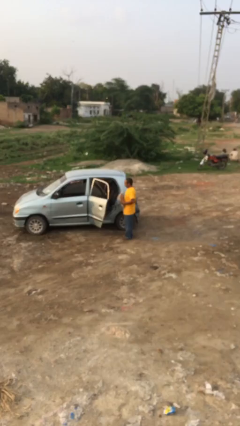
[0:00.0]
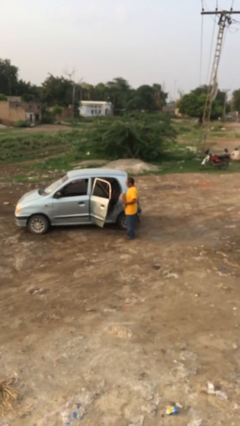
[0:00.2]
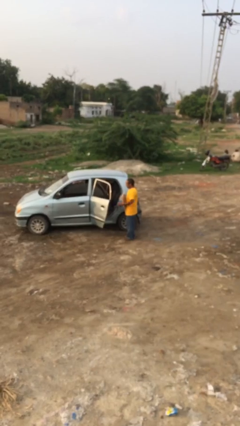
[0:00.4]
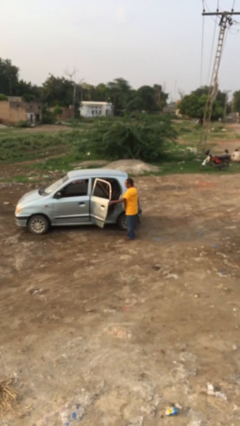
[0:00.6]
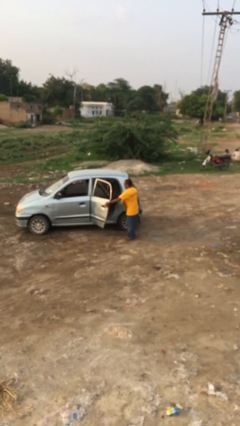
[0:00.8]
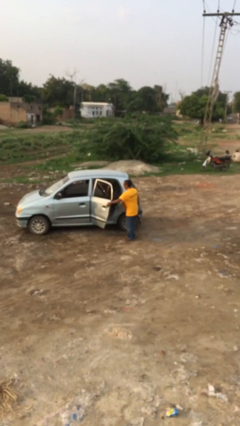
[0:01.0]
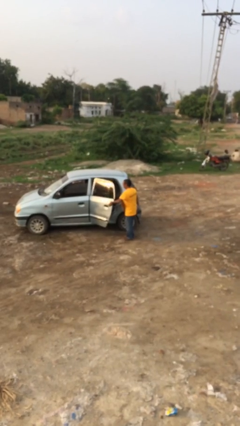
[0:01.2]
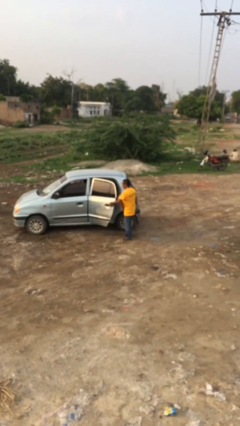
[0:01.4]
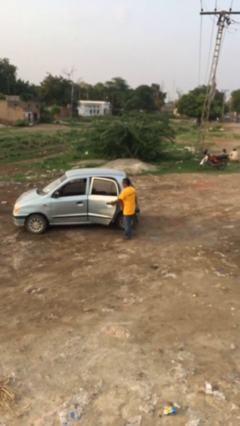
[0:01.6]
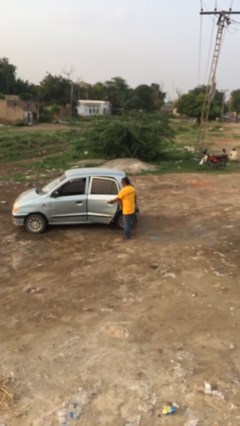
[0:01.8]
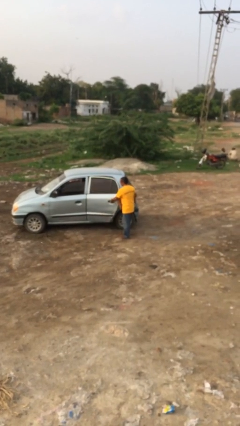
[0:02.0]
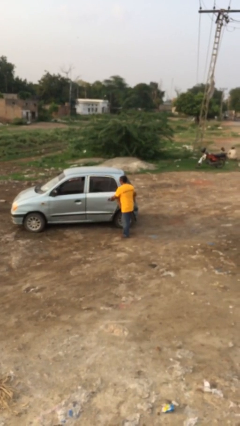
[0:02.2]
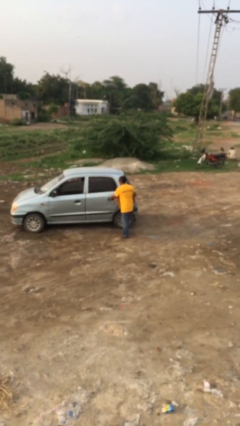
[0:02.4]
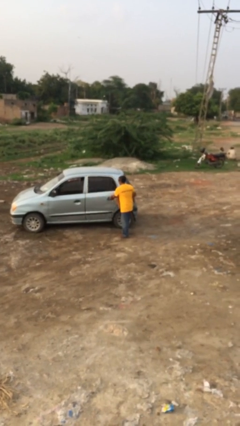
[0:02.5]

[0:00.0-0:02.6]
person closes car door

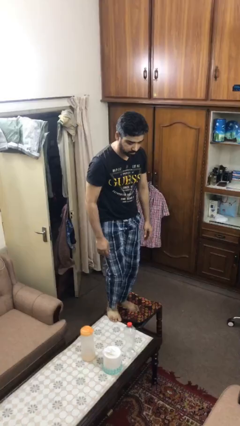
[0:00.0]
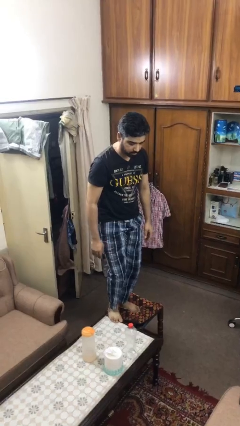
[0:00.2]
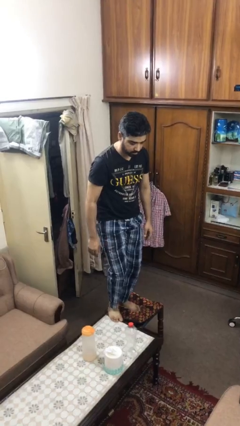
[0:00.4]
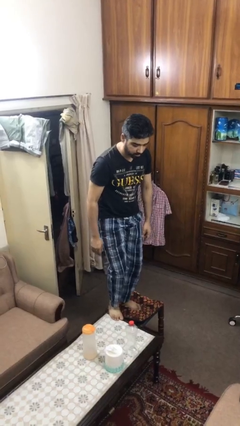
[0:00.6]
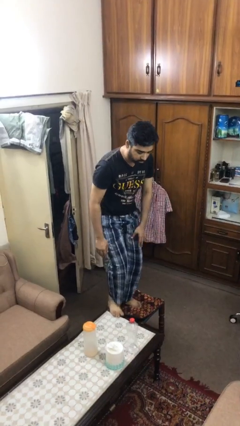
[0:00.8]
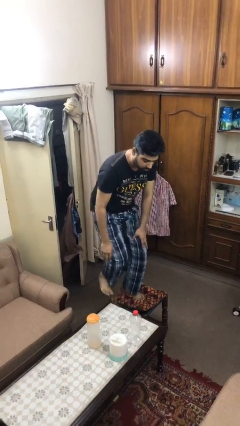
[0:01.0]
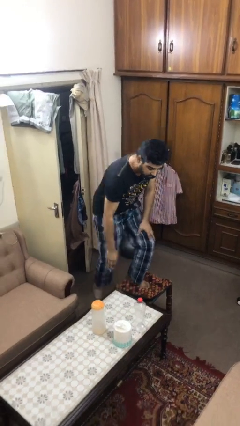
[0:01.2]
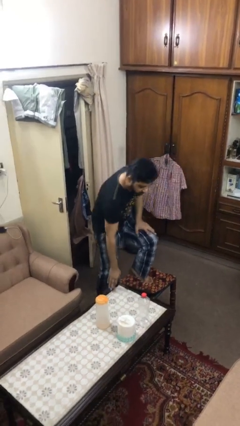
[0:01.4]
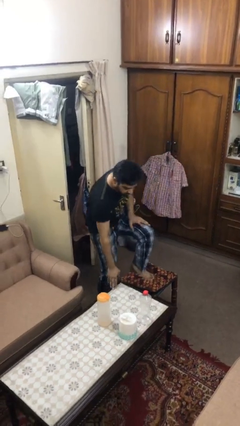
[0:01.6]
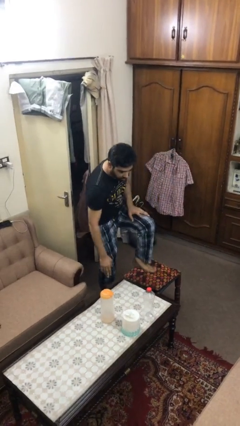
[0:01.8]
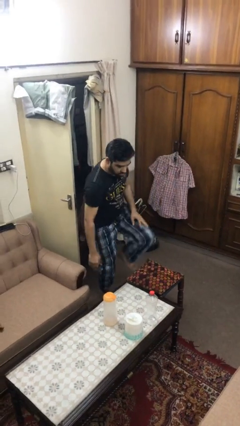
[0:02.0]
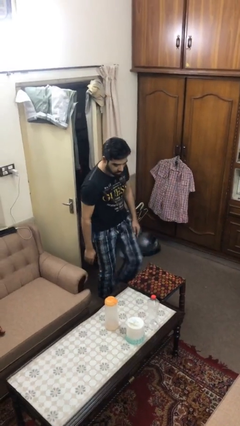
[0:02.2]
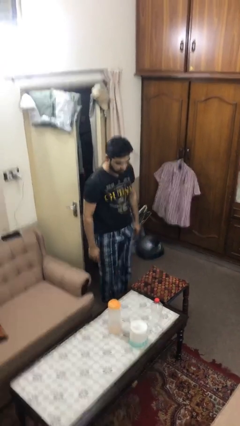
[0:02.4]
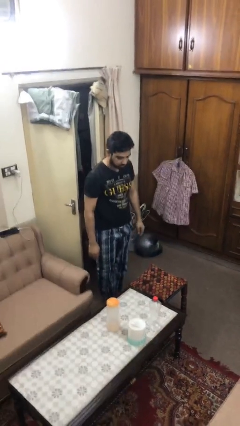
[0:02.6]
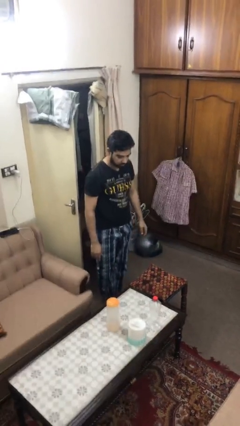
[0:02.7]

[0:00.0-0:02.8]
person climbs off table

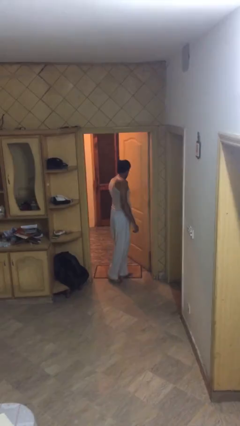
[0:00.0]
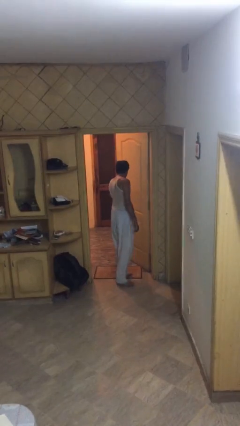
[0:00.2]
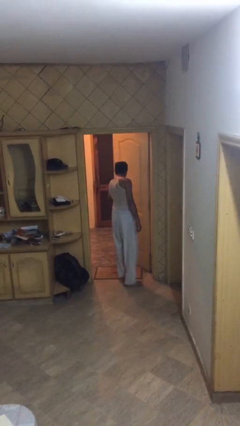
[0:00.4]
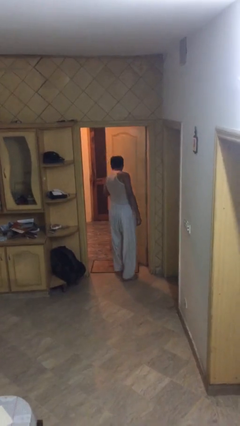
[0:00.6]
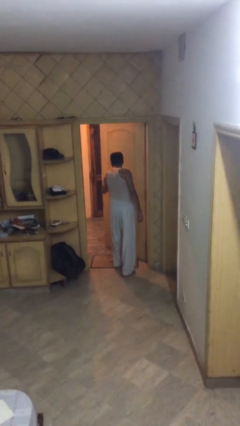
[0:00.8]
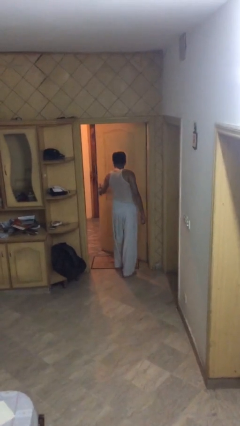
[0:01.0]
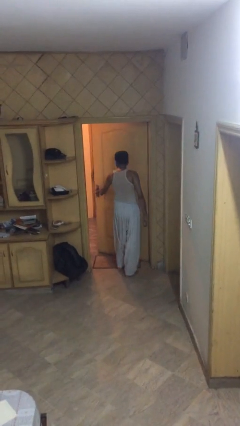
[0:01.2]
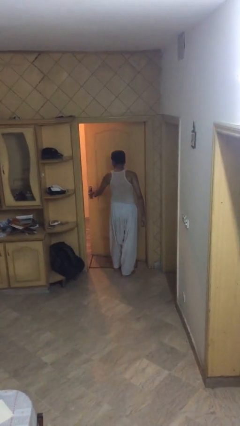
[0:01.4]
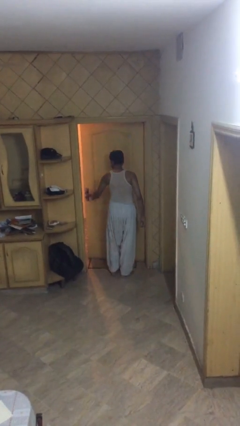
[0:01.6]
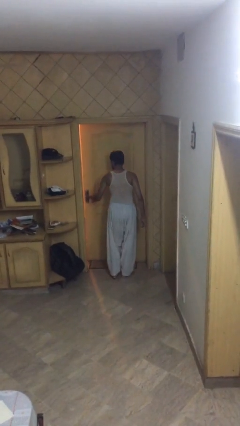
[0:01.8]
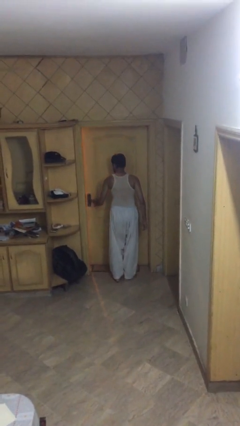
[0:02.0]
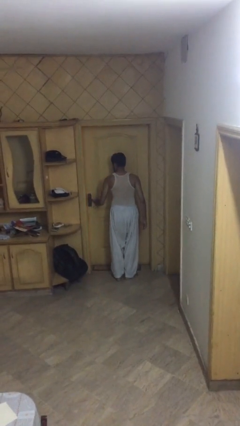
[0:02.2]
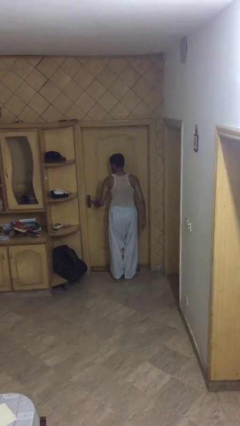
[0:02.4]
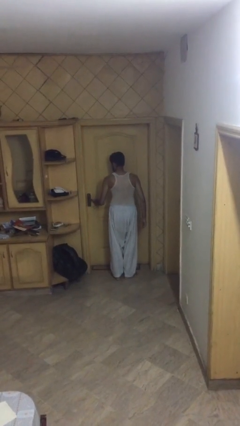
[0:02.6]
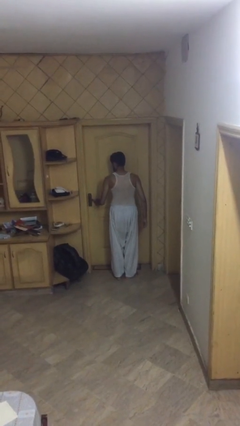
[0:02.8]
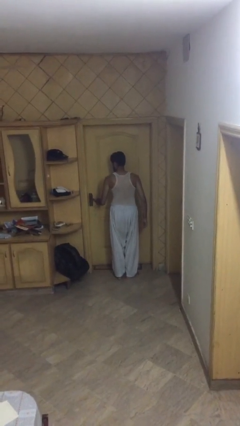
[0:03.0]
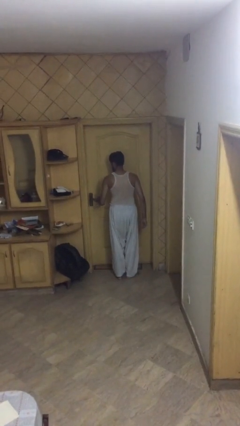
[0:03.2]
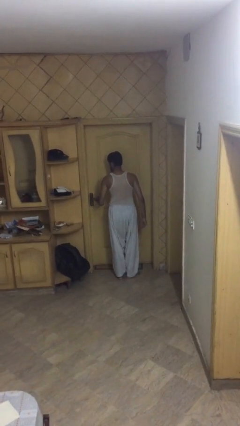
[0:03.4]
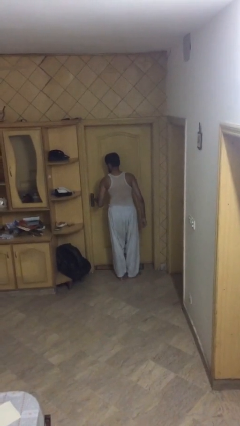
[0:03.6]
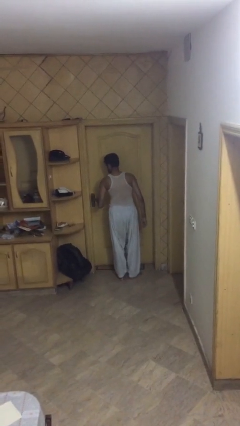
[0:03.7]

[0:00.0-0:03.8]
person closes facility door

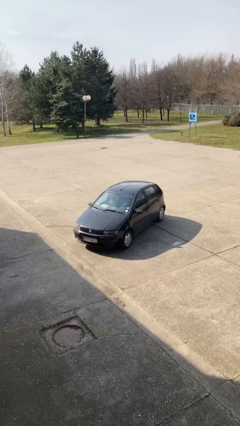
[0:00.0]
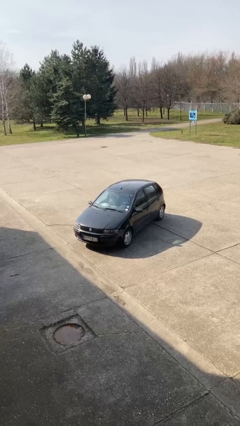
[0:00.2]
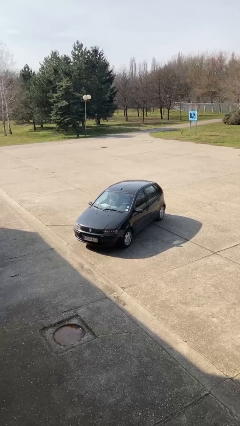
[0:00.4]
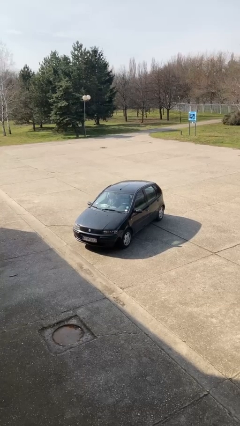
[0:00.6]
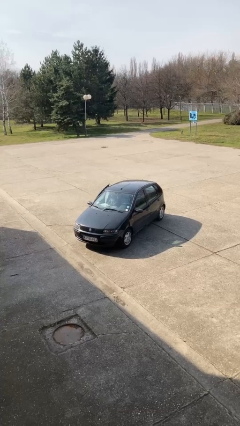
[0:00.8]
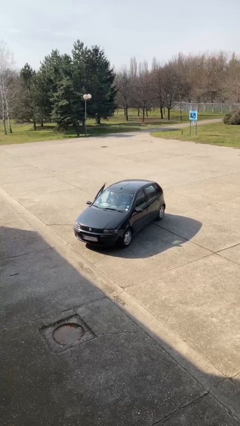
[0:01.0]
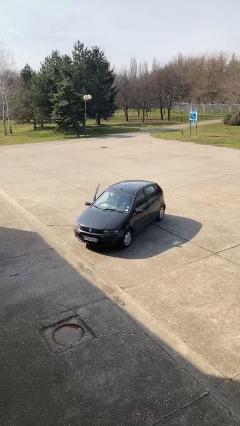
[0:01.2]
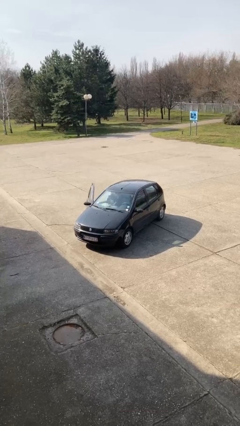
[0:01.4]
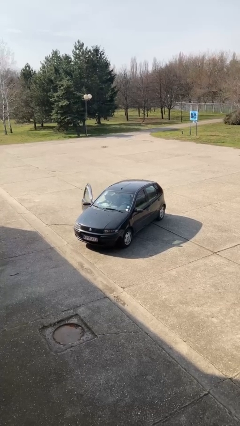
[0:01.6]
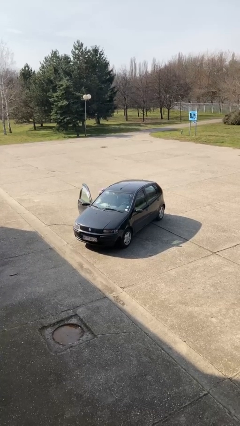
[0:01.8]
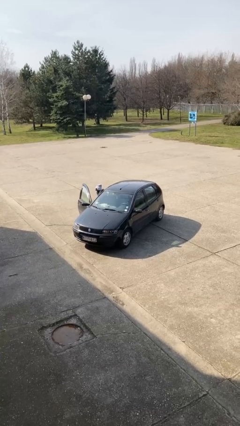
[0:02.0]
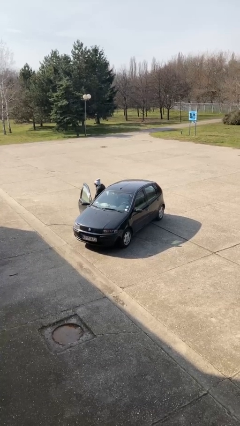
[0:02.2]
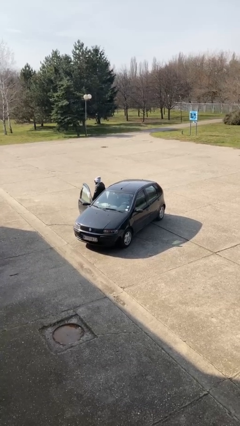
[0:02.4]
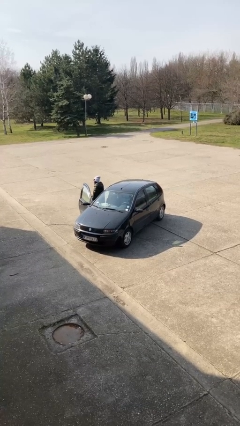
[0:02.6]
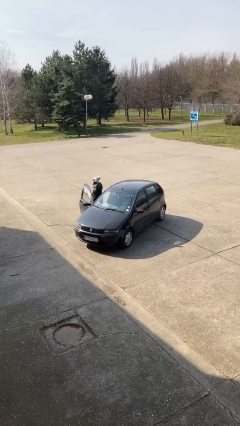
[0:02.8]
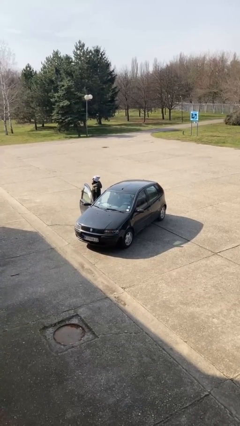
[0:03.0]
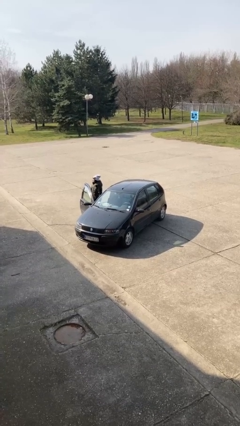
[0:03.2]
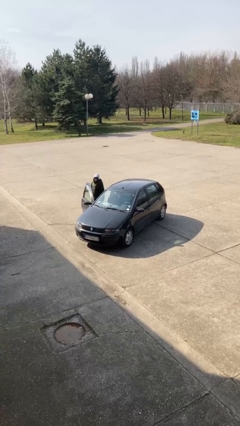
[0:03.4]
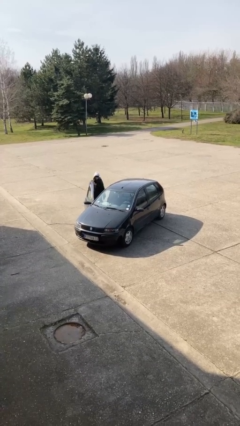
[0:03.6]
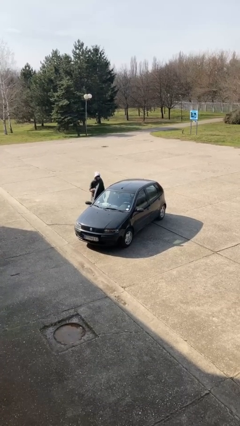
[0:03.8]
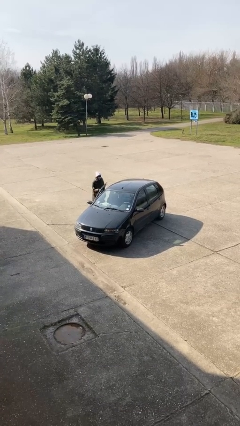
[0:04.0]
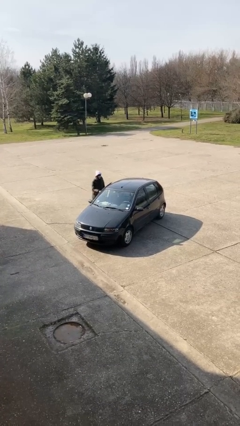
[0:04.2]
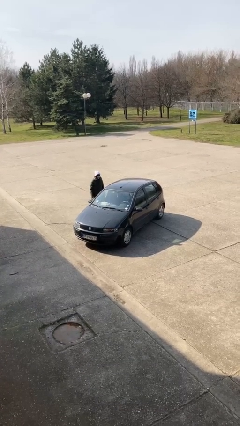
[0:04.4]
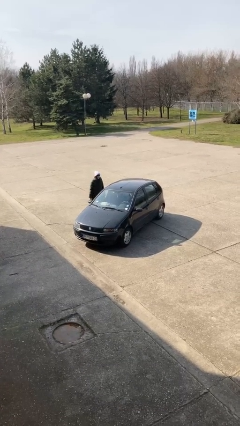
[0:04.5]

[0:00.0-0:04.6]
car drops off person

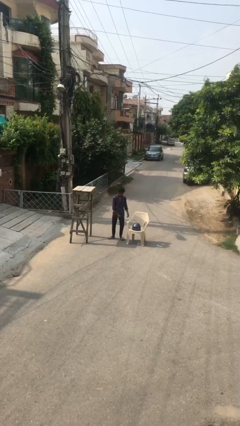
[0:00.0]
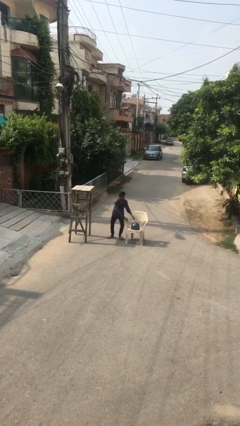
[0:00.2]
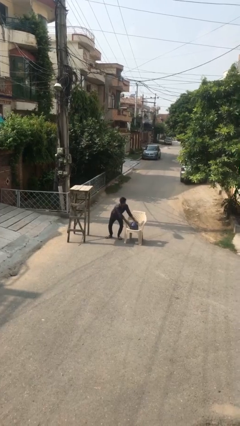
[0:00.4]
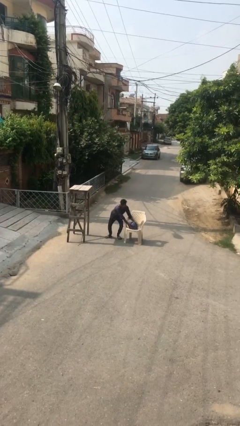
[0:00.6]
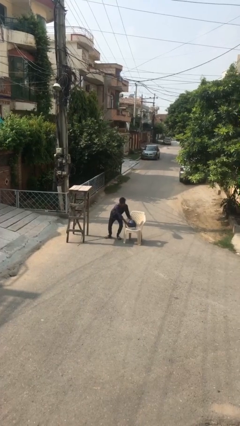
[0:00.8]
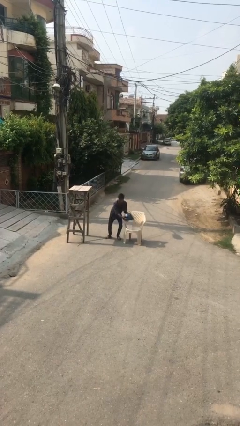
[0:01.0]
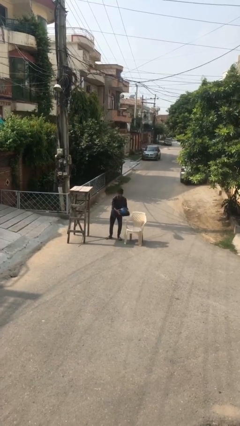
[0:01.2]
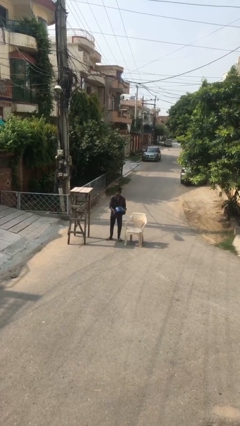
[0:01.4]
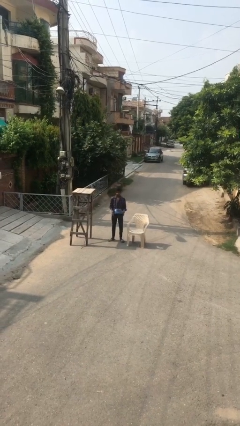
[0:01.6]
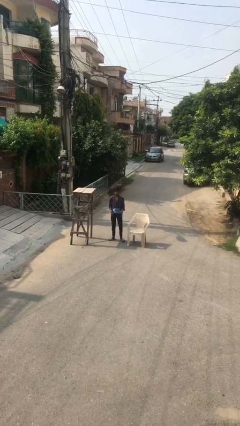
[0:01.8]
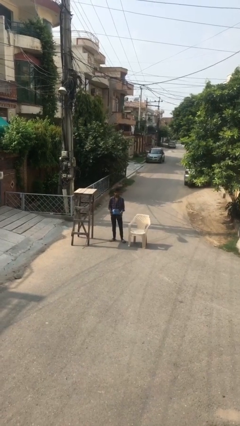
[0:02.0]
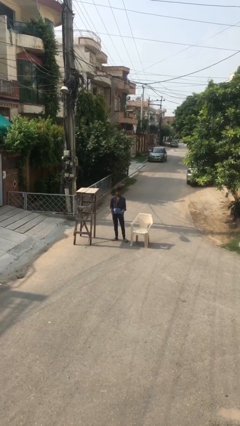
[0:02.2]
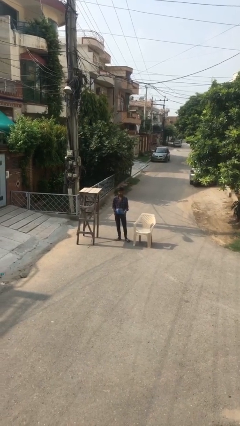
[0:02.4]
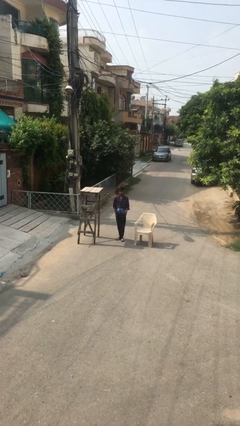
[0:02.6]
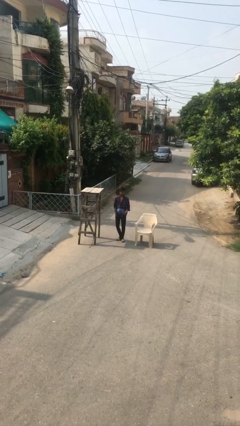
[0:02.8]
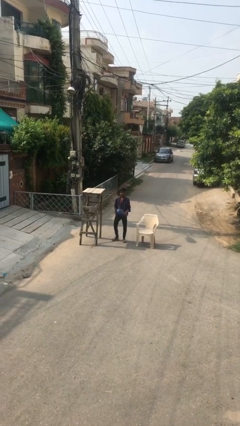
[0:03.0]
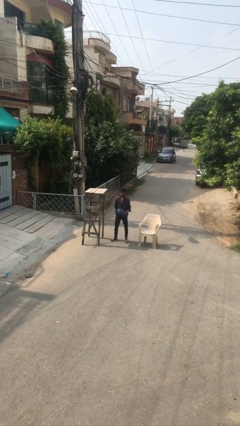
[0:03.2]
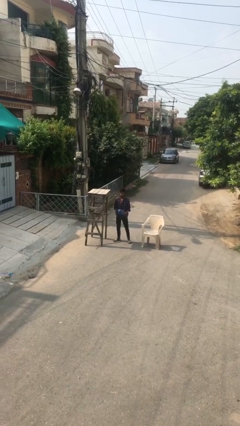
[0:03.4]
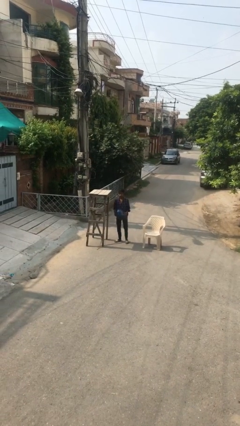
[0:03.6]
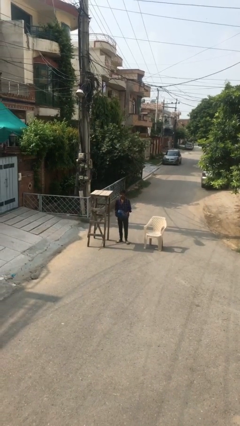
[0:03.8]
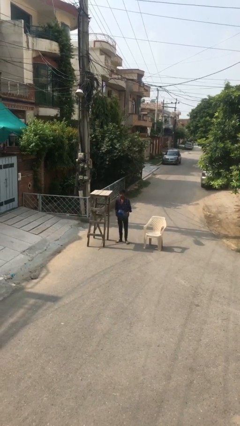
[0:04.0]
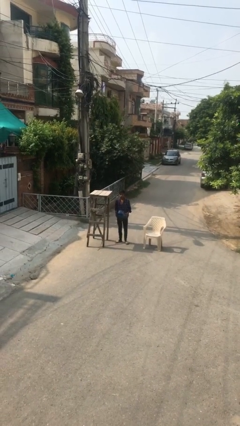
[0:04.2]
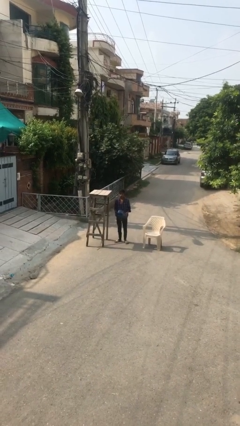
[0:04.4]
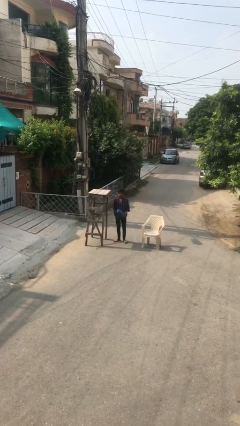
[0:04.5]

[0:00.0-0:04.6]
person picks up object from table
